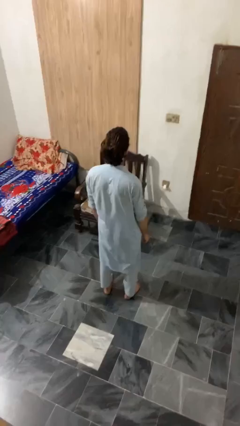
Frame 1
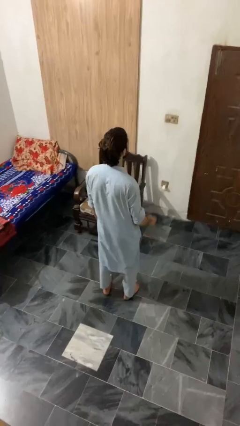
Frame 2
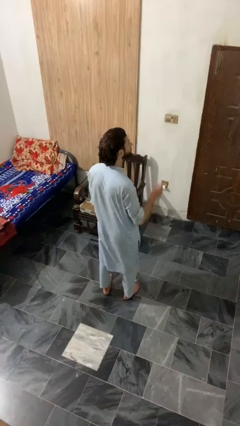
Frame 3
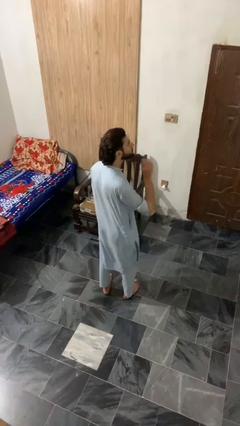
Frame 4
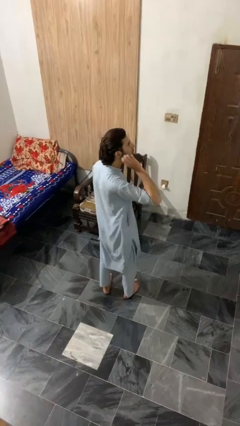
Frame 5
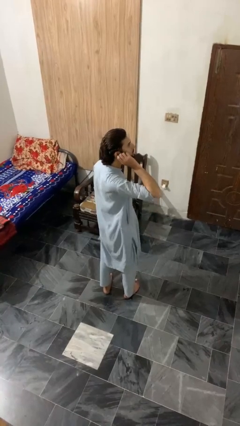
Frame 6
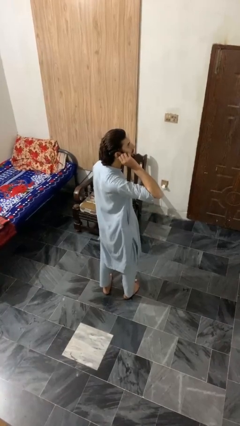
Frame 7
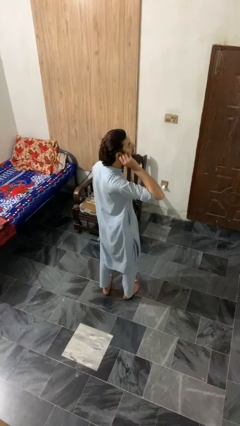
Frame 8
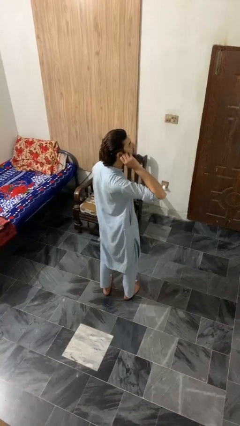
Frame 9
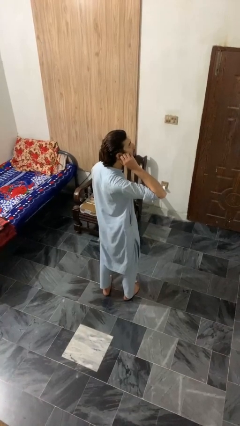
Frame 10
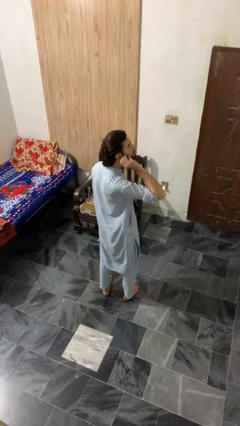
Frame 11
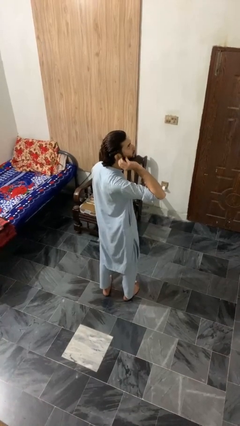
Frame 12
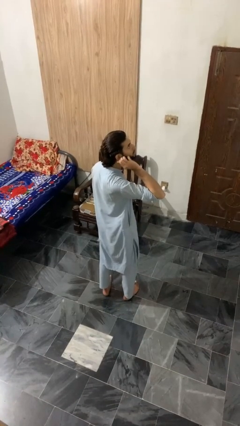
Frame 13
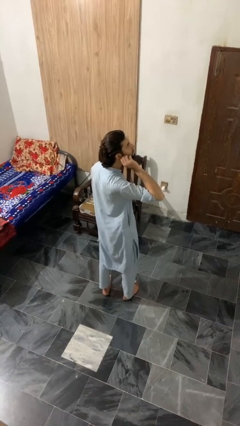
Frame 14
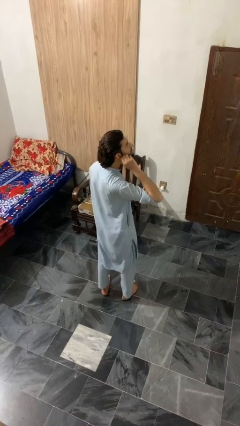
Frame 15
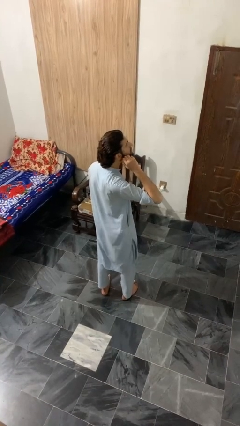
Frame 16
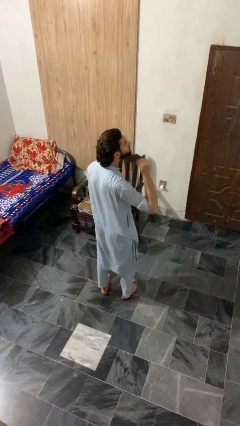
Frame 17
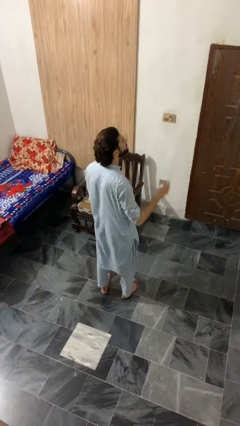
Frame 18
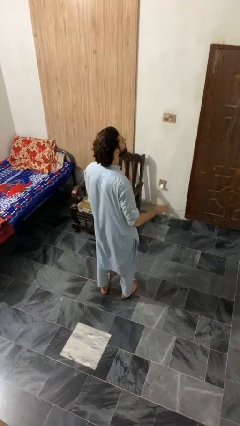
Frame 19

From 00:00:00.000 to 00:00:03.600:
person touches earlobe

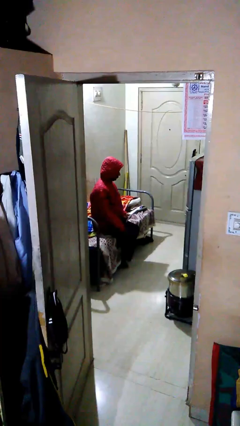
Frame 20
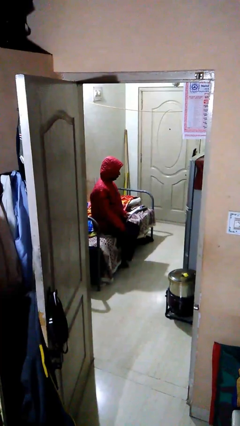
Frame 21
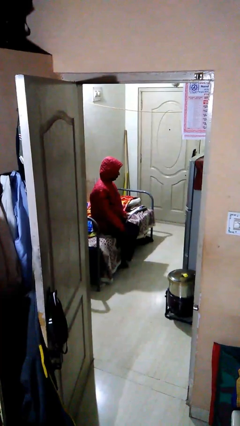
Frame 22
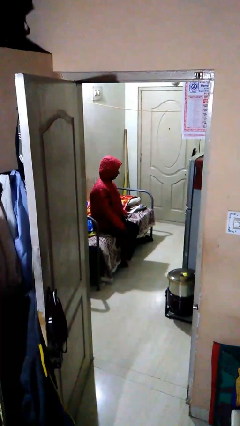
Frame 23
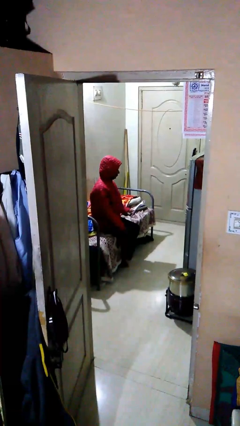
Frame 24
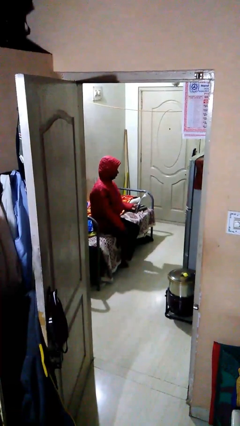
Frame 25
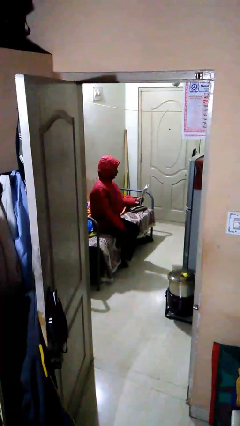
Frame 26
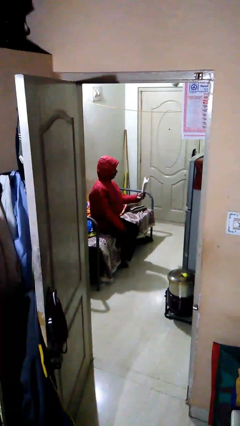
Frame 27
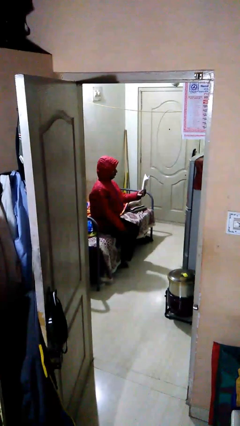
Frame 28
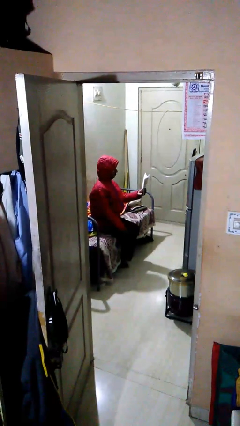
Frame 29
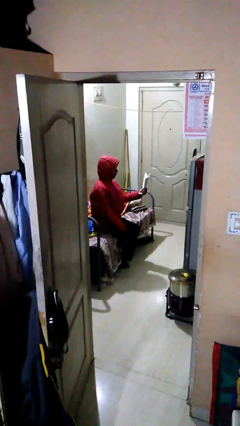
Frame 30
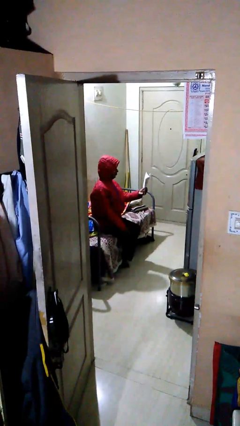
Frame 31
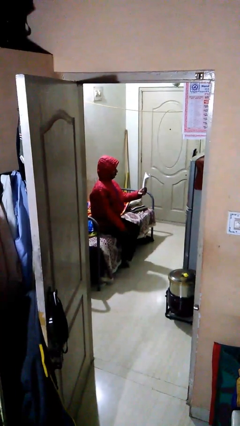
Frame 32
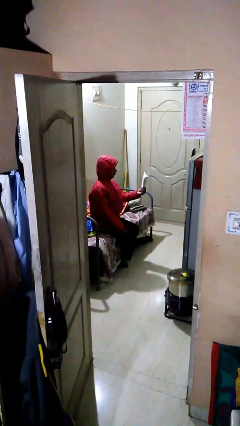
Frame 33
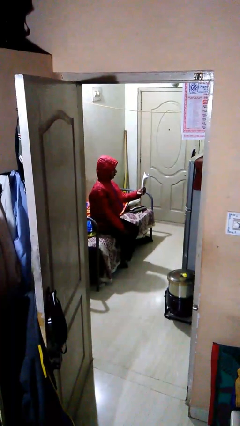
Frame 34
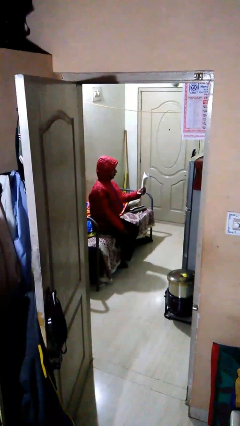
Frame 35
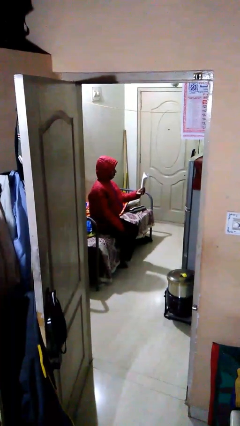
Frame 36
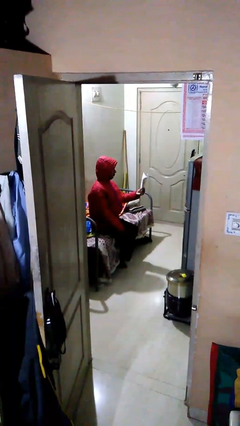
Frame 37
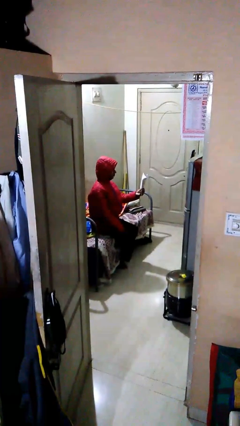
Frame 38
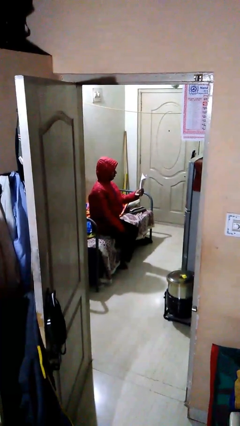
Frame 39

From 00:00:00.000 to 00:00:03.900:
person reads document

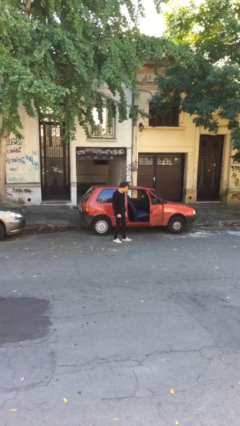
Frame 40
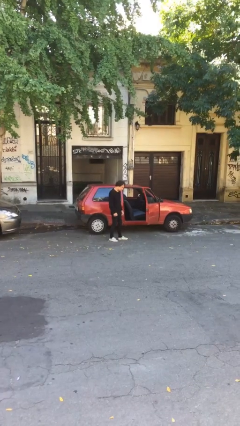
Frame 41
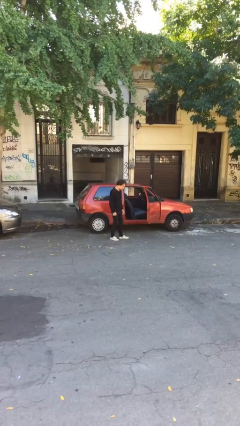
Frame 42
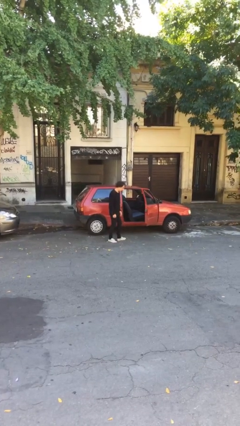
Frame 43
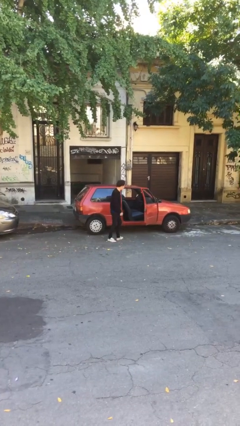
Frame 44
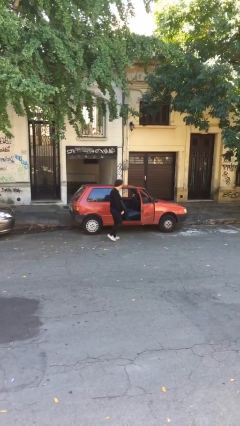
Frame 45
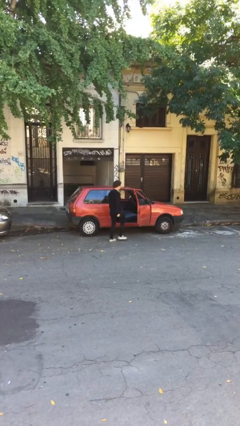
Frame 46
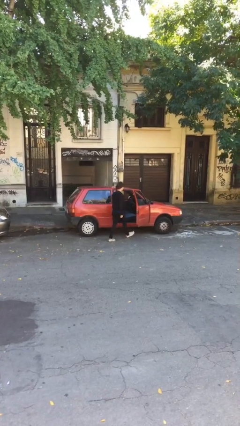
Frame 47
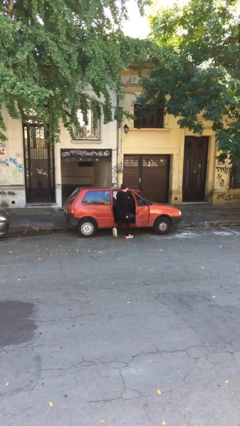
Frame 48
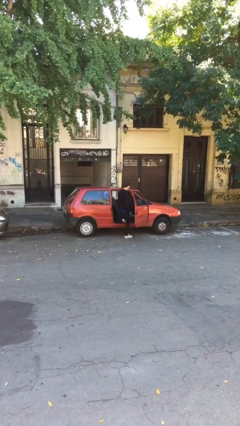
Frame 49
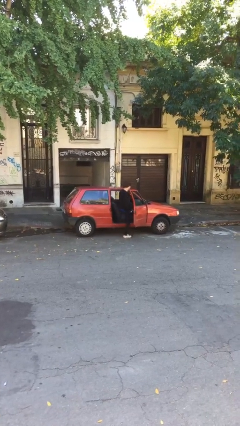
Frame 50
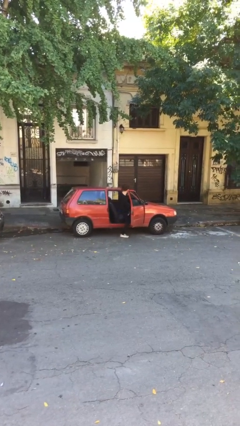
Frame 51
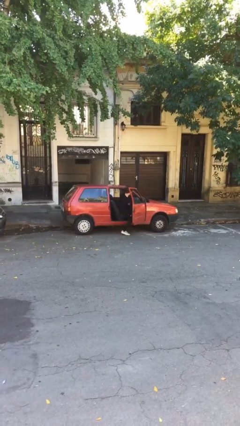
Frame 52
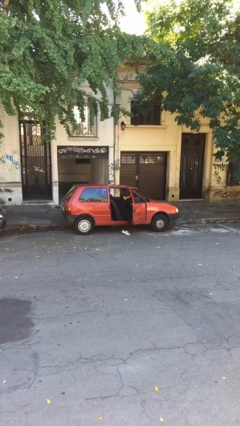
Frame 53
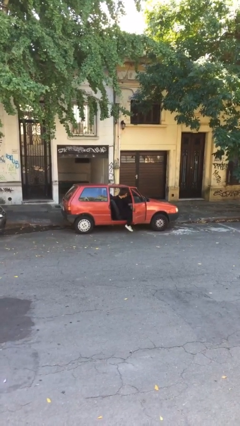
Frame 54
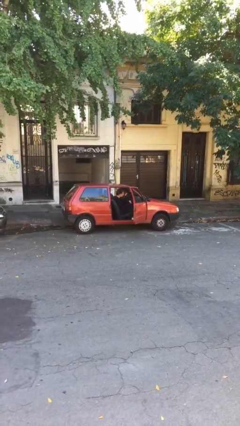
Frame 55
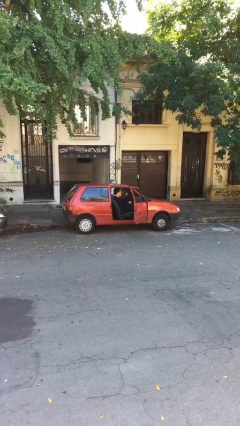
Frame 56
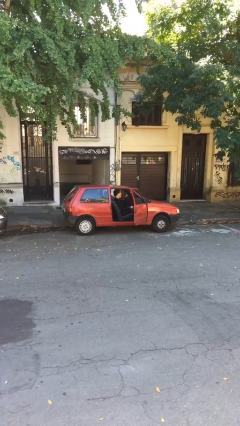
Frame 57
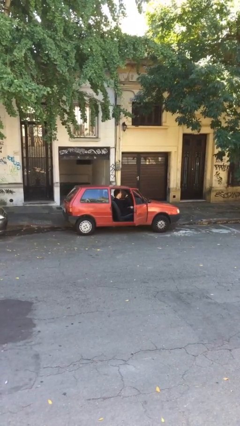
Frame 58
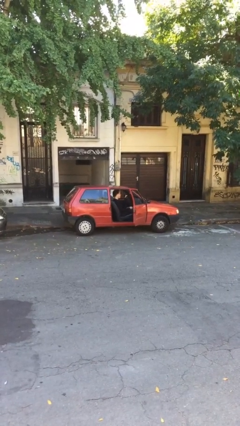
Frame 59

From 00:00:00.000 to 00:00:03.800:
person enters car

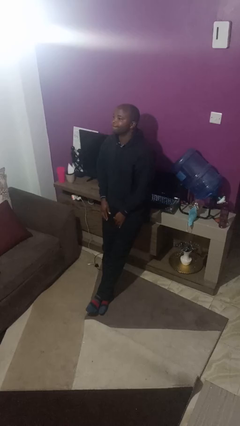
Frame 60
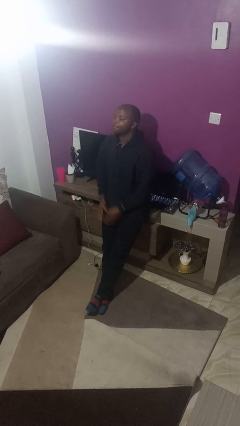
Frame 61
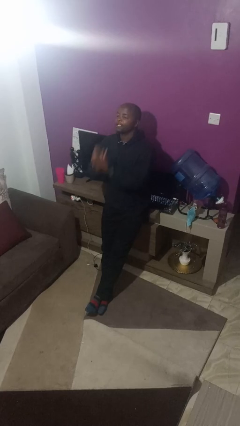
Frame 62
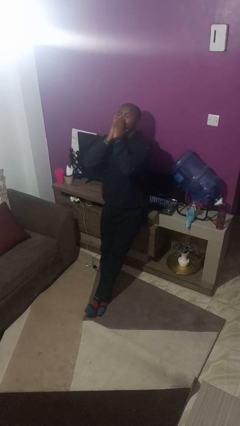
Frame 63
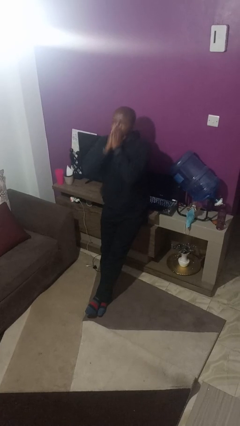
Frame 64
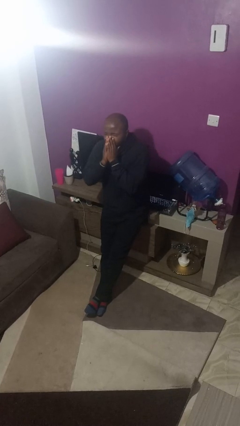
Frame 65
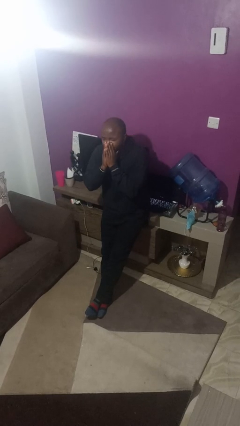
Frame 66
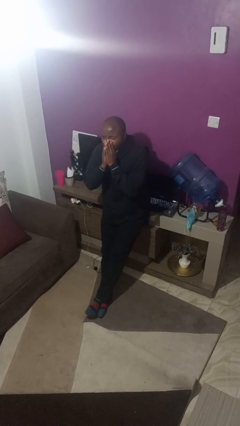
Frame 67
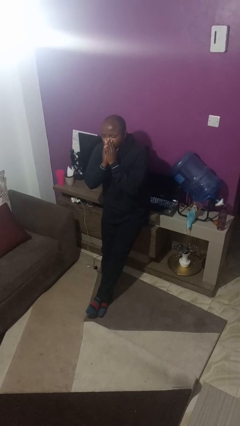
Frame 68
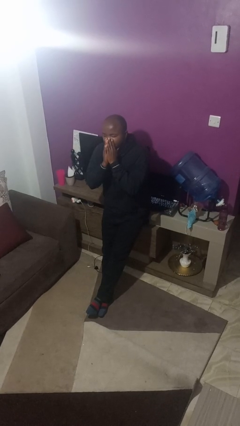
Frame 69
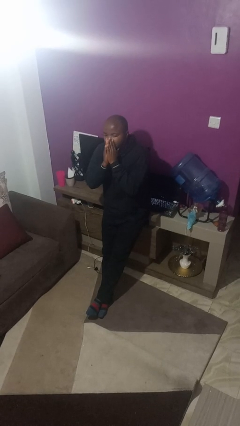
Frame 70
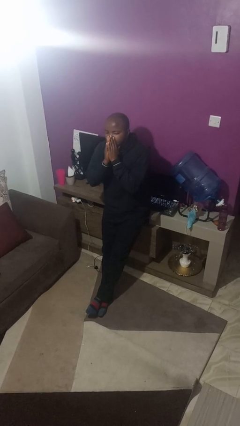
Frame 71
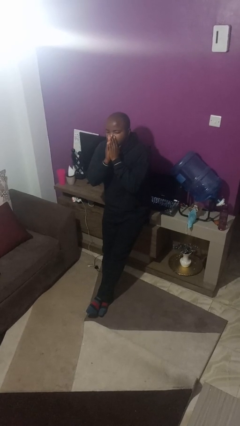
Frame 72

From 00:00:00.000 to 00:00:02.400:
person sneezes into hand

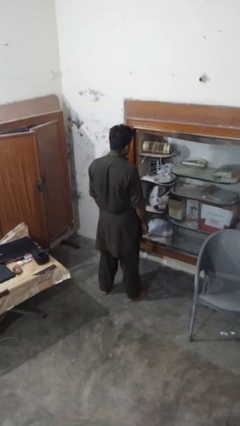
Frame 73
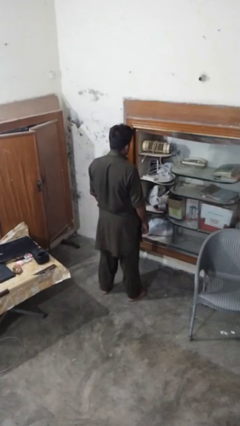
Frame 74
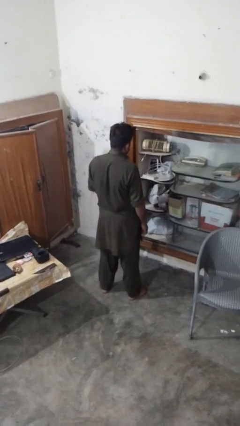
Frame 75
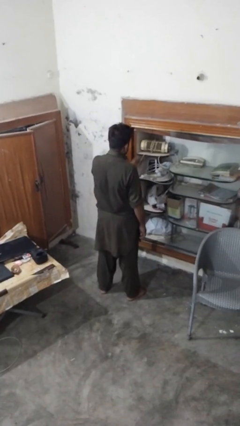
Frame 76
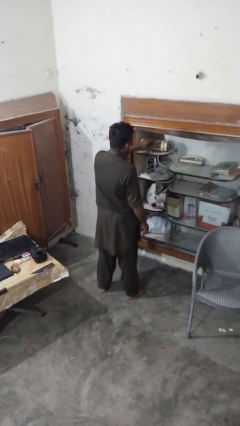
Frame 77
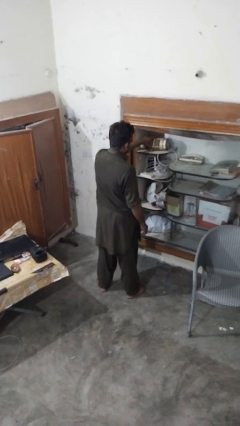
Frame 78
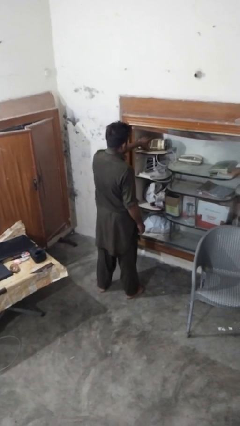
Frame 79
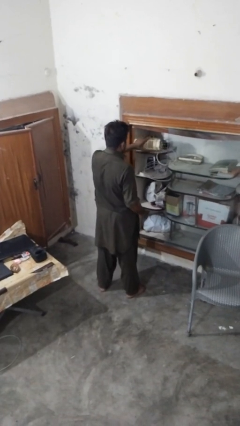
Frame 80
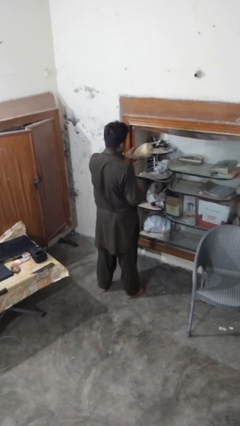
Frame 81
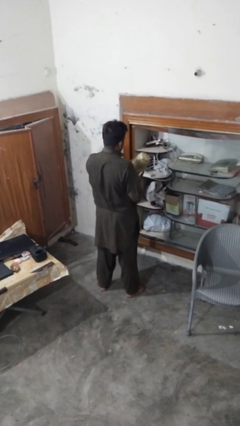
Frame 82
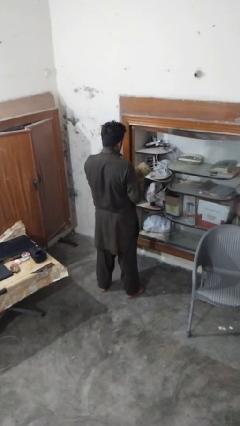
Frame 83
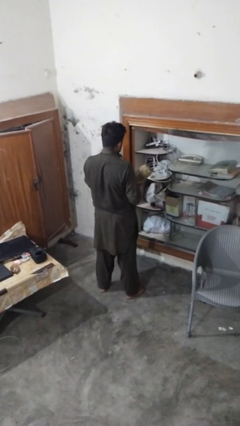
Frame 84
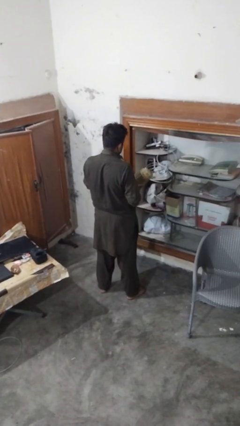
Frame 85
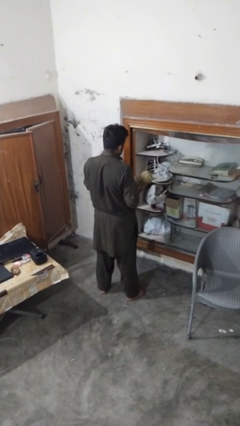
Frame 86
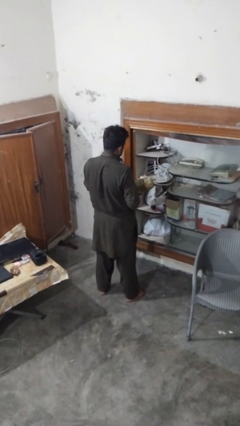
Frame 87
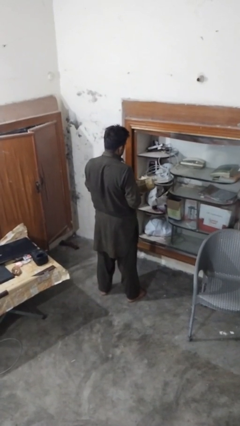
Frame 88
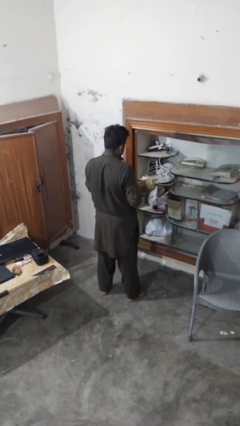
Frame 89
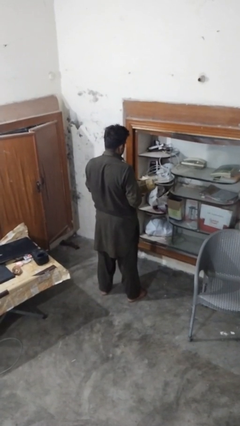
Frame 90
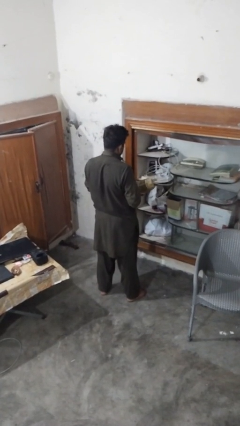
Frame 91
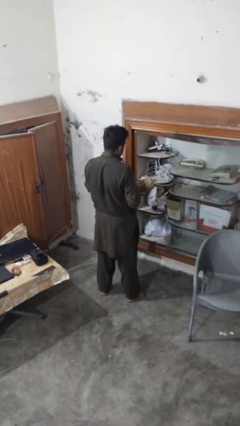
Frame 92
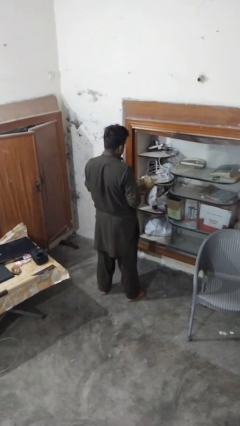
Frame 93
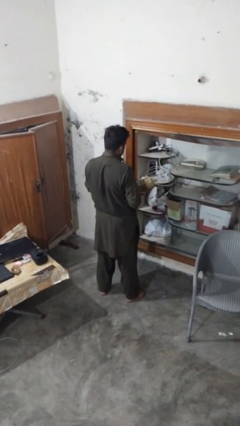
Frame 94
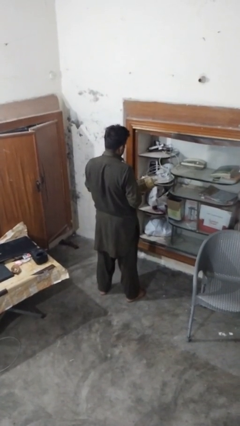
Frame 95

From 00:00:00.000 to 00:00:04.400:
person picks up object from countertop
